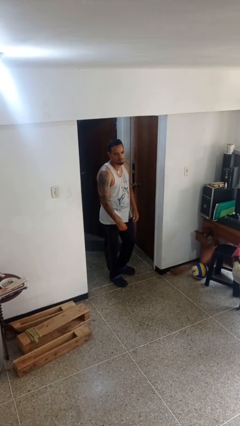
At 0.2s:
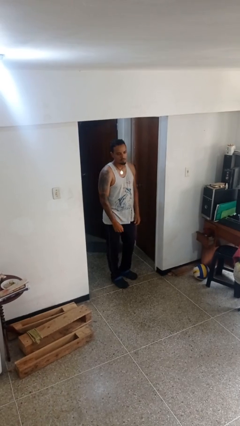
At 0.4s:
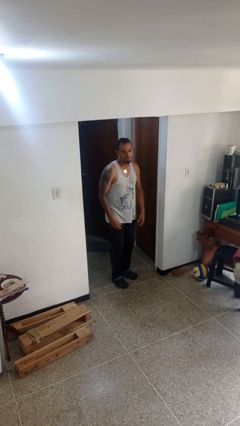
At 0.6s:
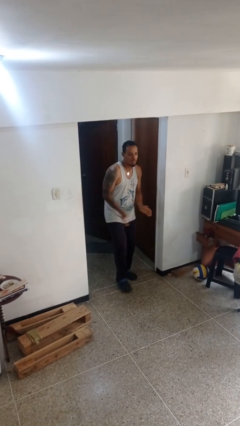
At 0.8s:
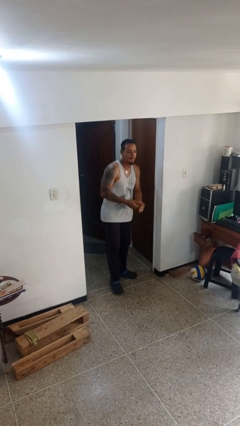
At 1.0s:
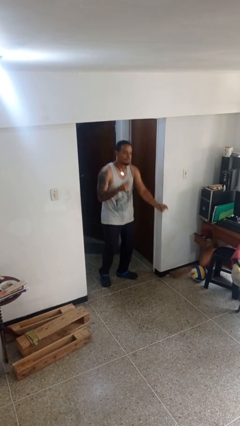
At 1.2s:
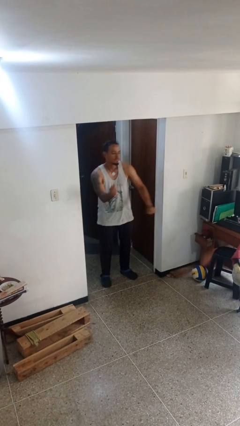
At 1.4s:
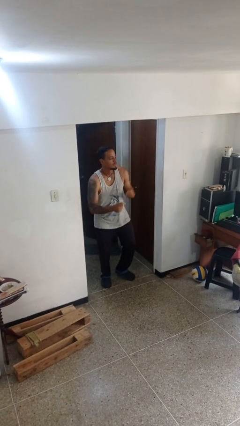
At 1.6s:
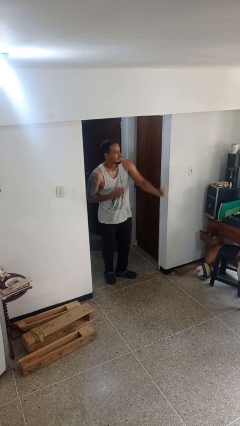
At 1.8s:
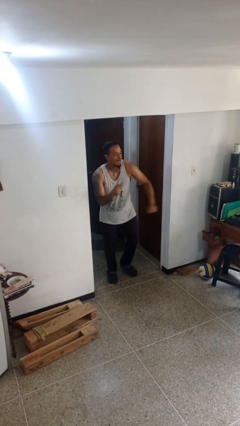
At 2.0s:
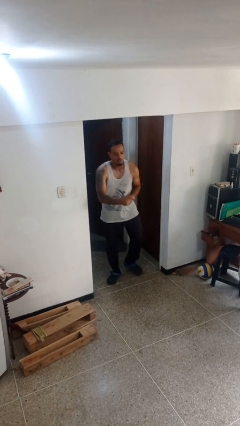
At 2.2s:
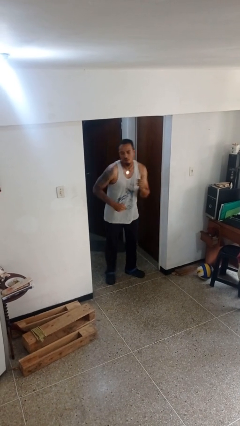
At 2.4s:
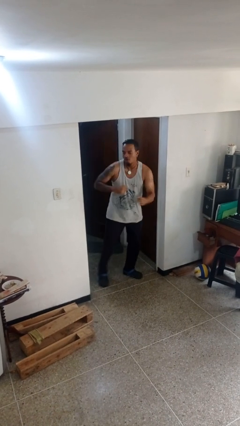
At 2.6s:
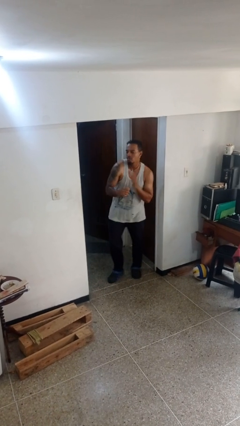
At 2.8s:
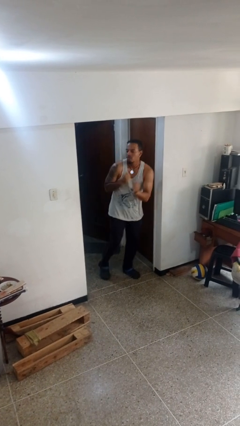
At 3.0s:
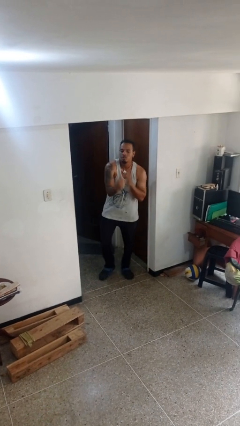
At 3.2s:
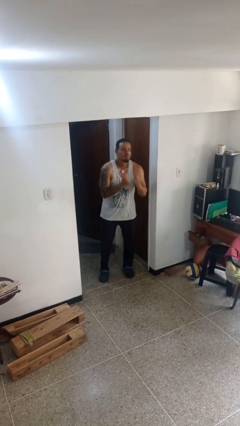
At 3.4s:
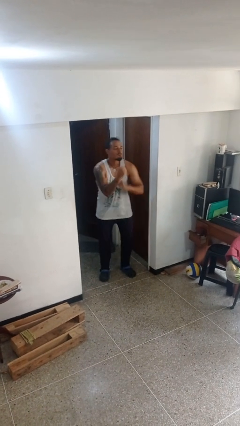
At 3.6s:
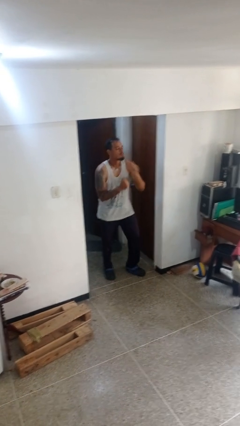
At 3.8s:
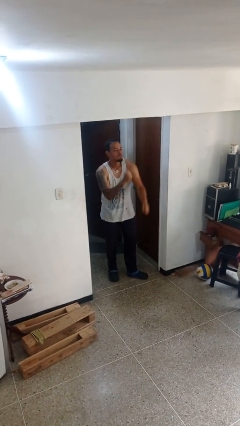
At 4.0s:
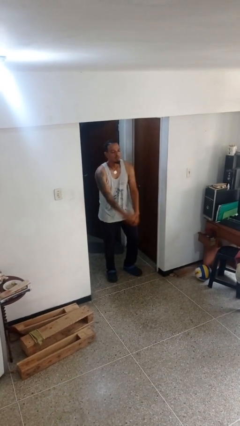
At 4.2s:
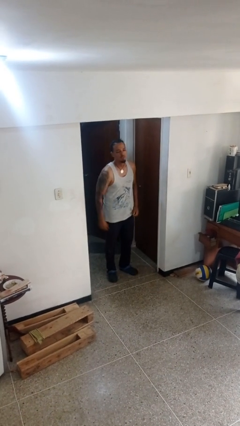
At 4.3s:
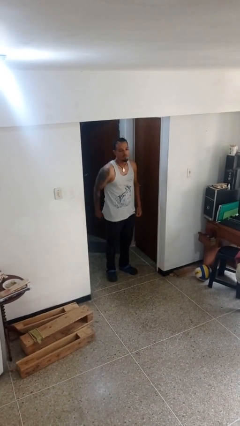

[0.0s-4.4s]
person dances in place

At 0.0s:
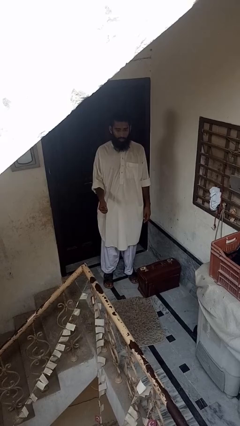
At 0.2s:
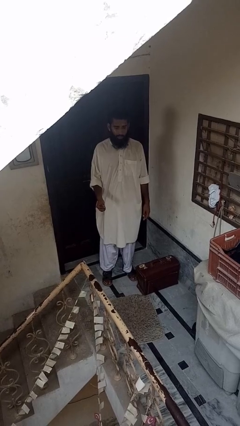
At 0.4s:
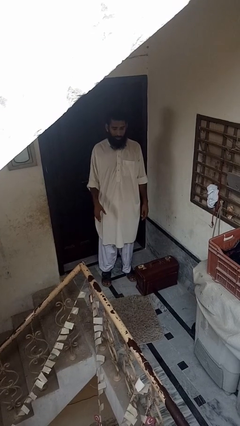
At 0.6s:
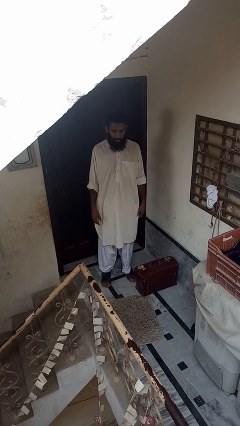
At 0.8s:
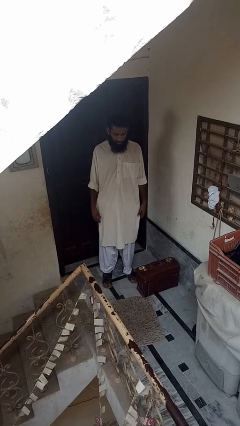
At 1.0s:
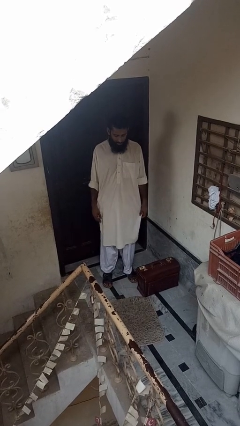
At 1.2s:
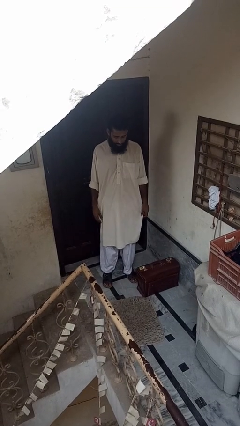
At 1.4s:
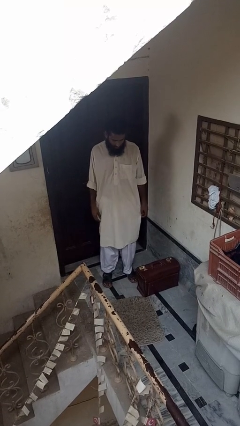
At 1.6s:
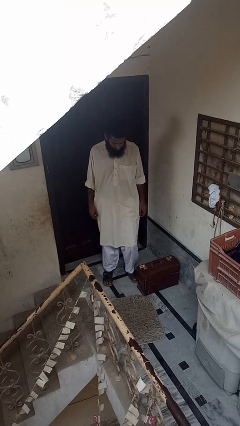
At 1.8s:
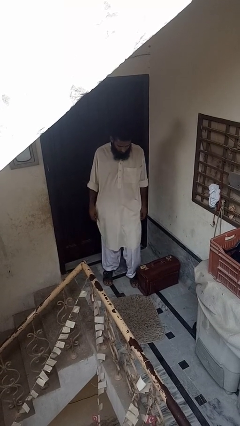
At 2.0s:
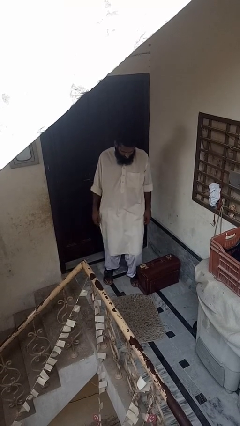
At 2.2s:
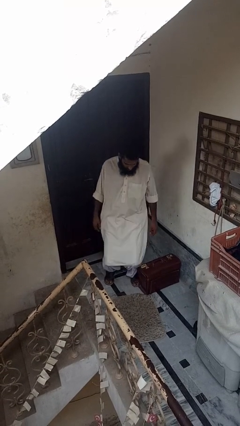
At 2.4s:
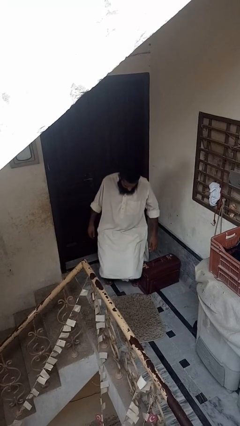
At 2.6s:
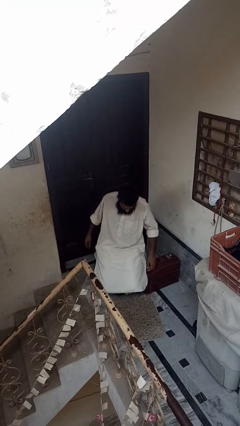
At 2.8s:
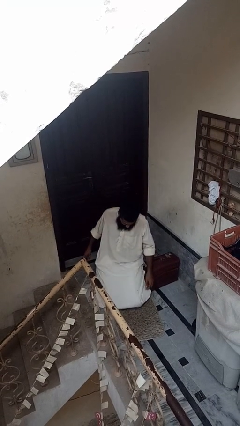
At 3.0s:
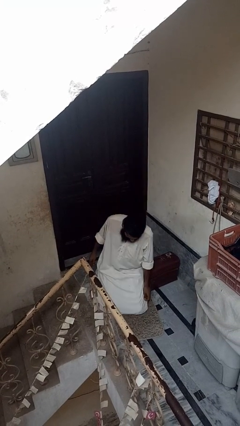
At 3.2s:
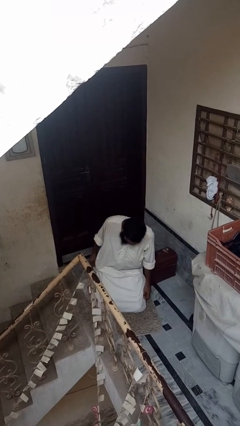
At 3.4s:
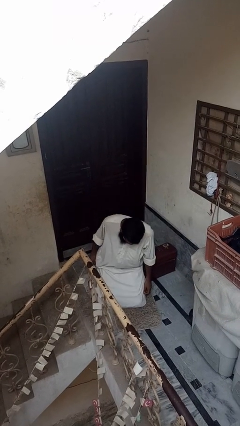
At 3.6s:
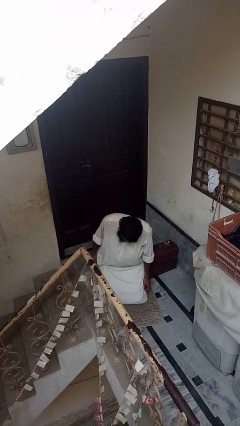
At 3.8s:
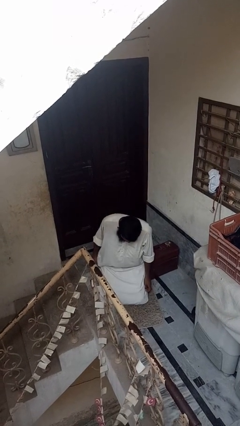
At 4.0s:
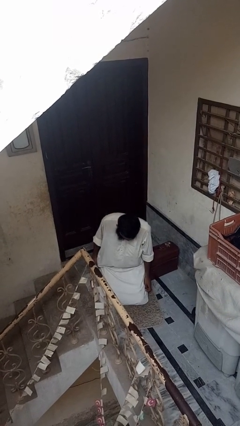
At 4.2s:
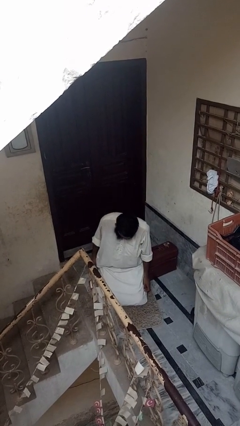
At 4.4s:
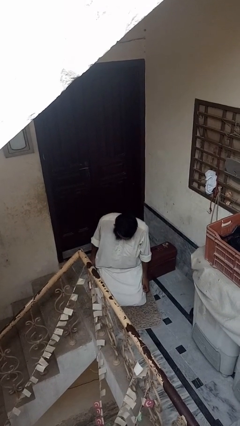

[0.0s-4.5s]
person trips on object on floor

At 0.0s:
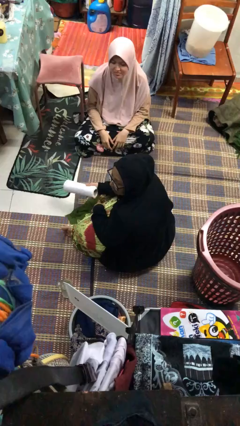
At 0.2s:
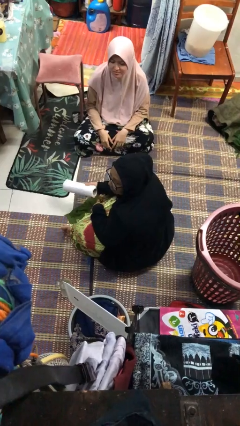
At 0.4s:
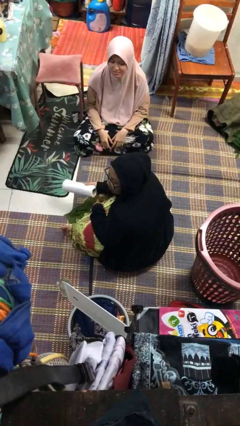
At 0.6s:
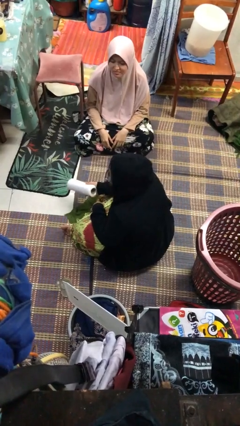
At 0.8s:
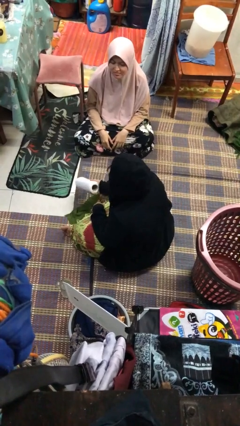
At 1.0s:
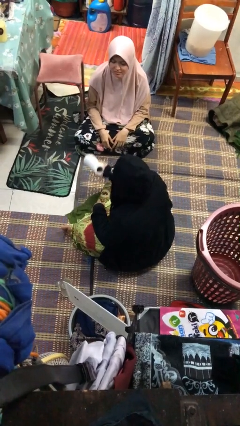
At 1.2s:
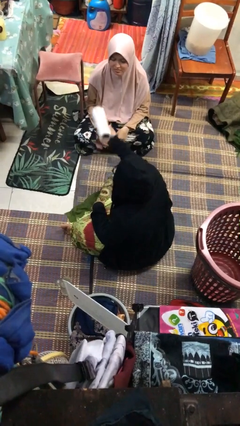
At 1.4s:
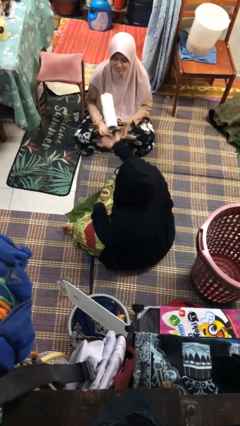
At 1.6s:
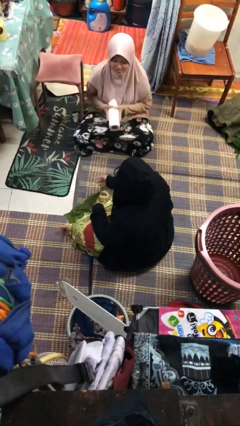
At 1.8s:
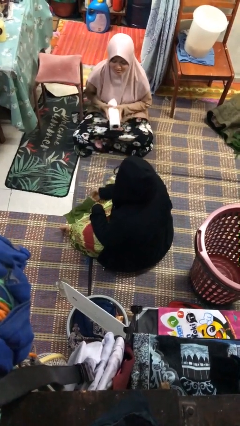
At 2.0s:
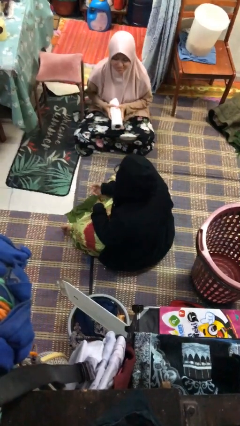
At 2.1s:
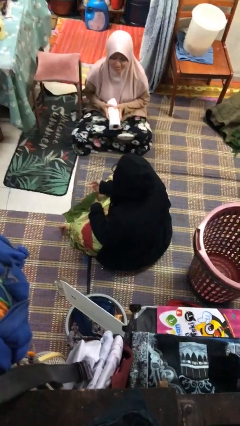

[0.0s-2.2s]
person throws object to person

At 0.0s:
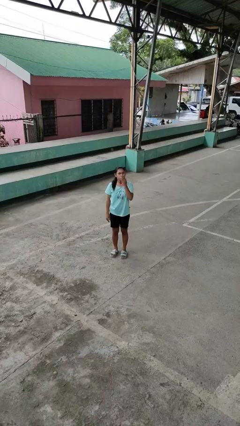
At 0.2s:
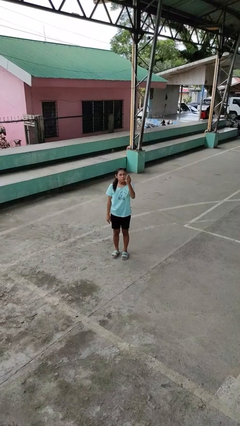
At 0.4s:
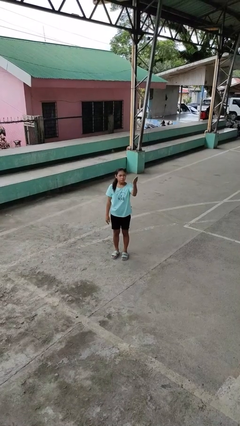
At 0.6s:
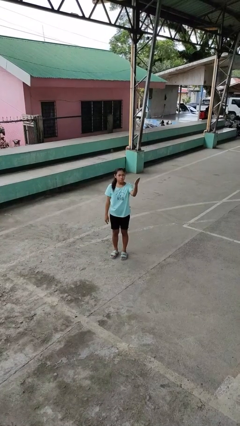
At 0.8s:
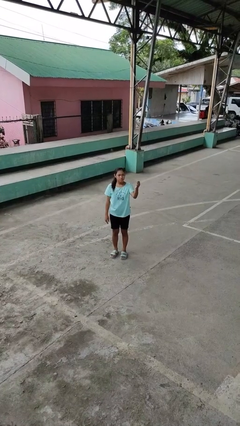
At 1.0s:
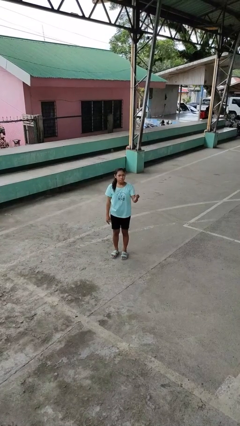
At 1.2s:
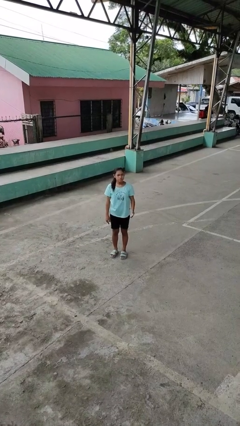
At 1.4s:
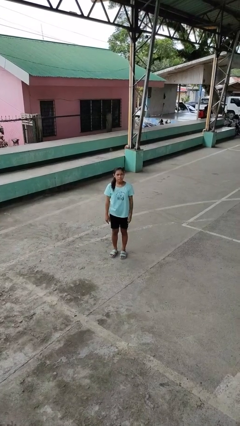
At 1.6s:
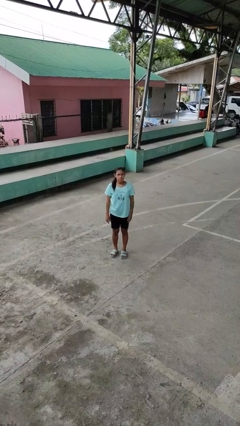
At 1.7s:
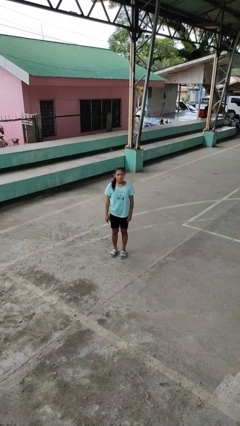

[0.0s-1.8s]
person gestures blow kiss

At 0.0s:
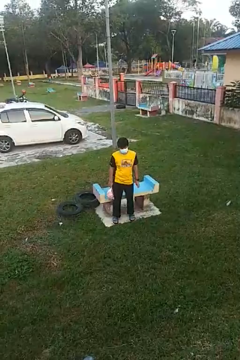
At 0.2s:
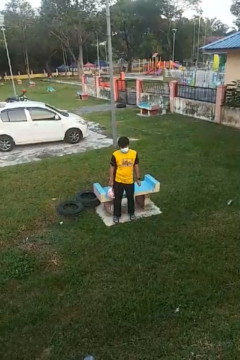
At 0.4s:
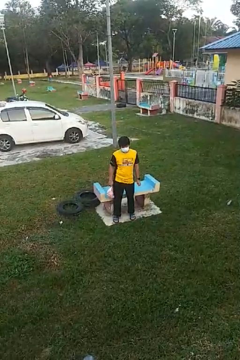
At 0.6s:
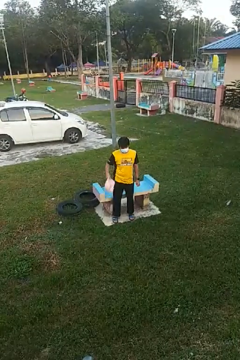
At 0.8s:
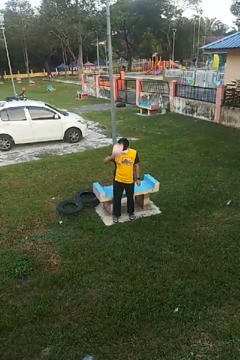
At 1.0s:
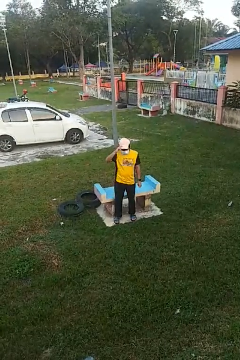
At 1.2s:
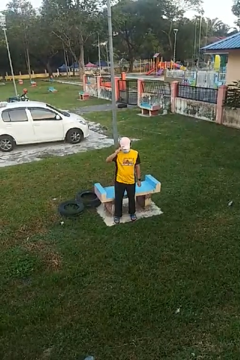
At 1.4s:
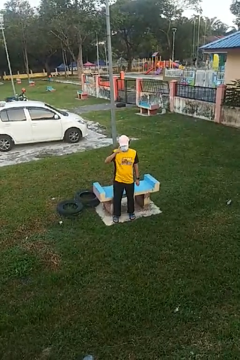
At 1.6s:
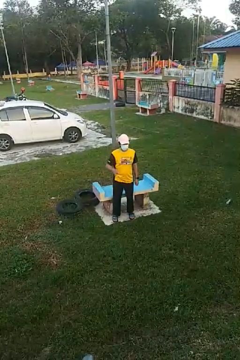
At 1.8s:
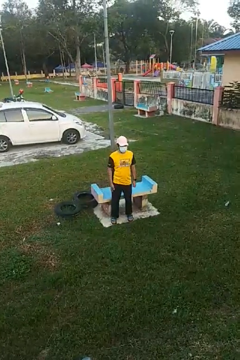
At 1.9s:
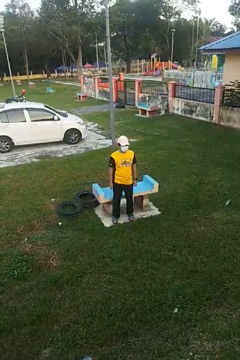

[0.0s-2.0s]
person puts on hat

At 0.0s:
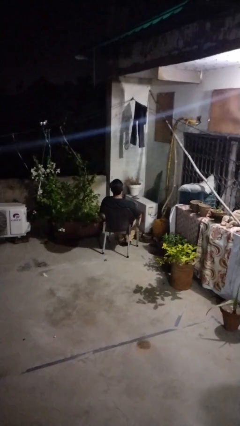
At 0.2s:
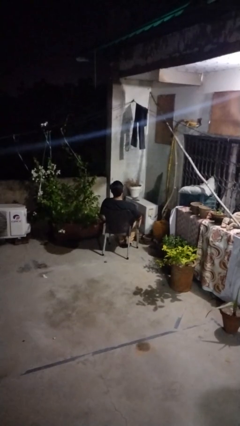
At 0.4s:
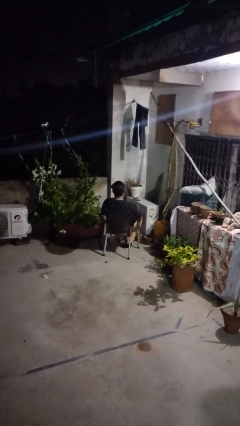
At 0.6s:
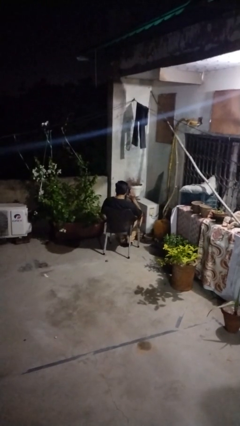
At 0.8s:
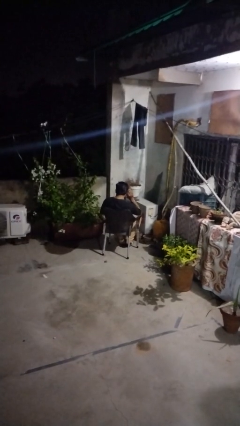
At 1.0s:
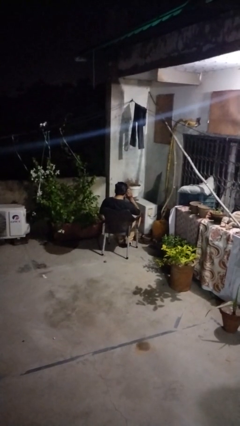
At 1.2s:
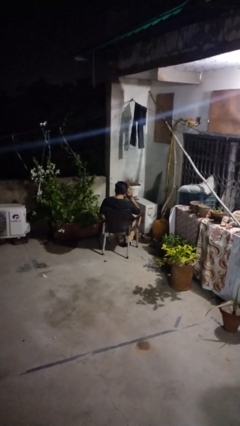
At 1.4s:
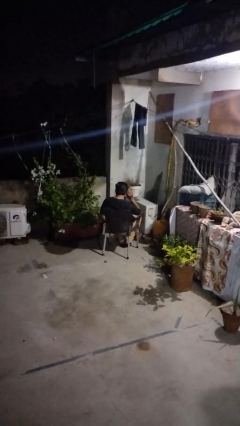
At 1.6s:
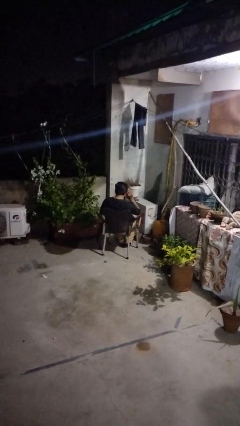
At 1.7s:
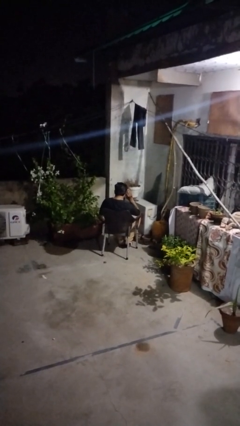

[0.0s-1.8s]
person gestures listen closely

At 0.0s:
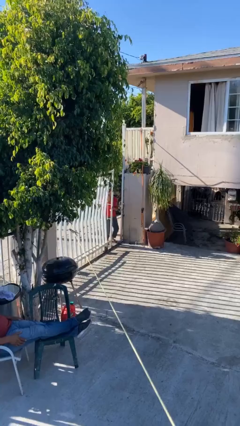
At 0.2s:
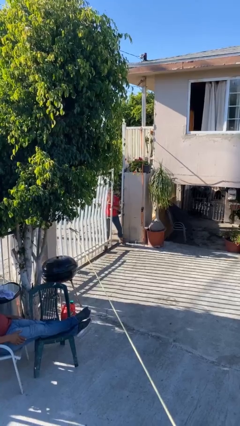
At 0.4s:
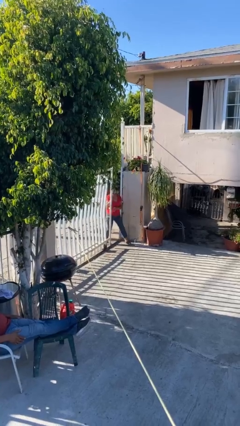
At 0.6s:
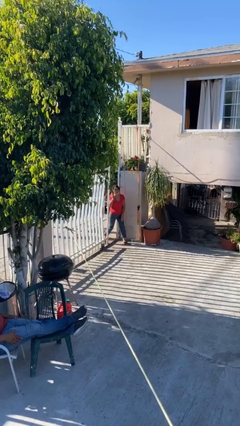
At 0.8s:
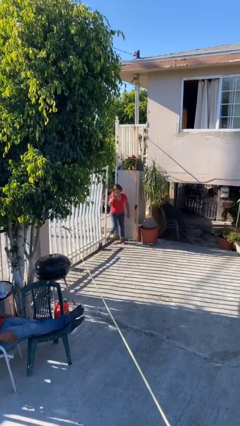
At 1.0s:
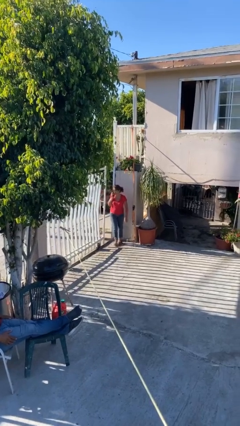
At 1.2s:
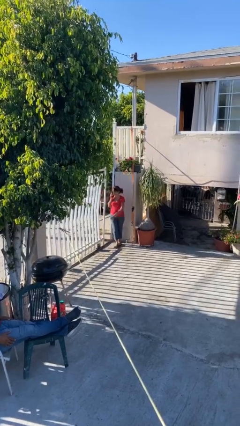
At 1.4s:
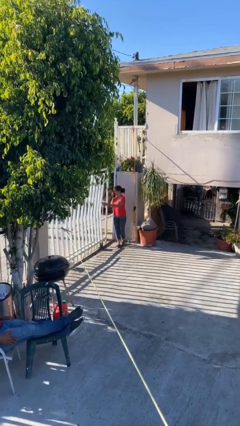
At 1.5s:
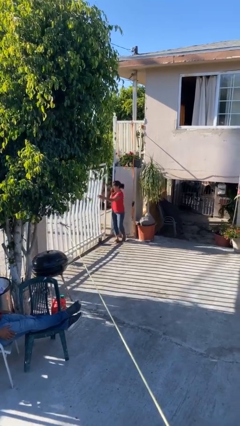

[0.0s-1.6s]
person enters scene through structure
